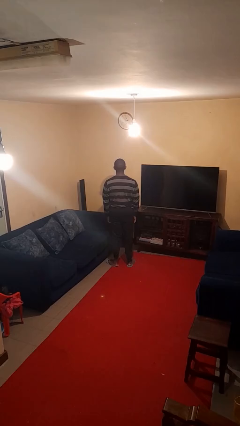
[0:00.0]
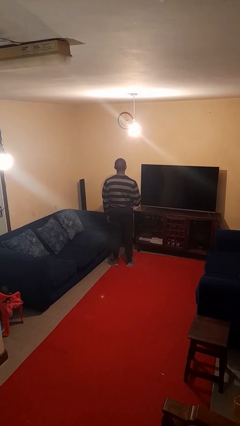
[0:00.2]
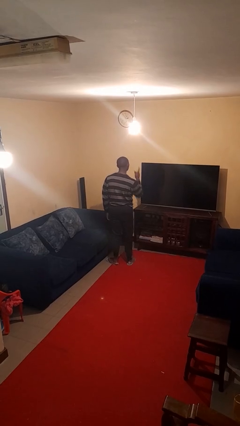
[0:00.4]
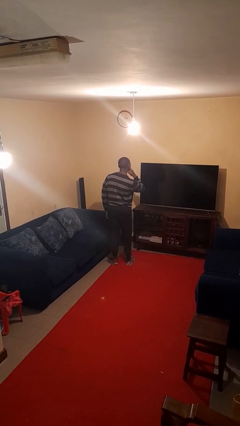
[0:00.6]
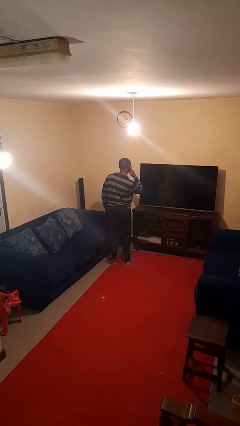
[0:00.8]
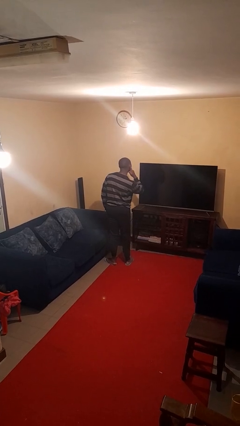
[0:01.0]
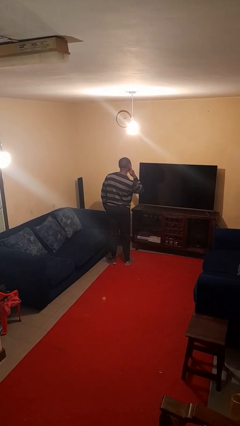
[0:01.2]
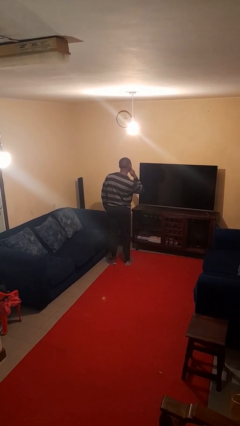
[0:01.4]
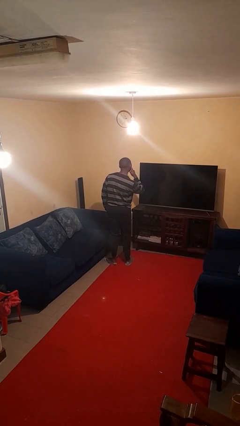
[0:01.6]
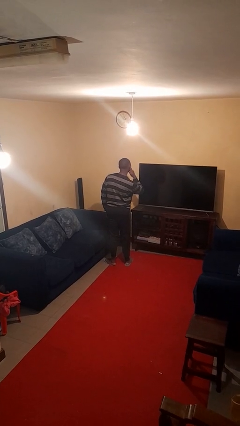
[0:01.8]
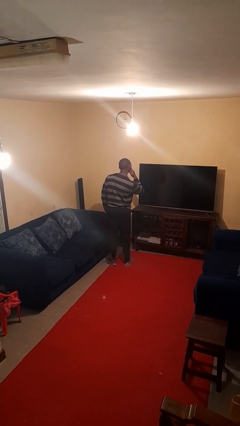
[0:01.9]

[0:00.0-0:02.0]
person gestures listen closely

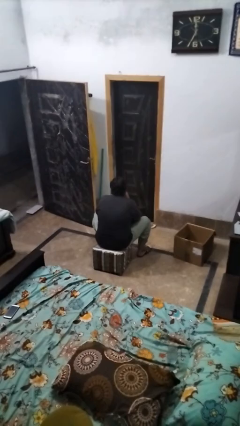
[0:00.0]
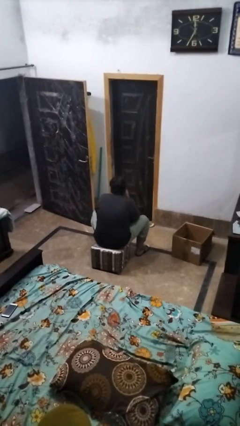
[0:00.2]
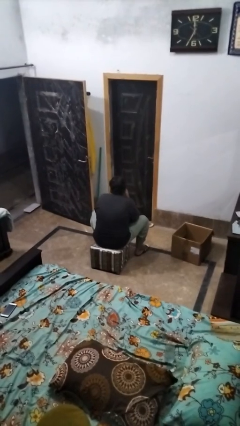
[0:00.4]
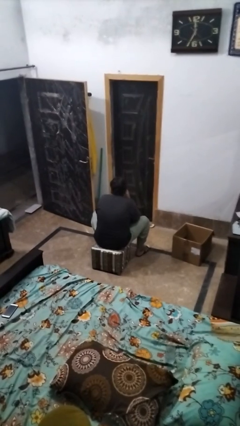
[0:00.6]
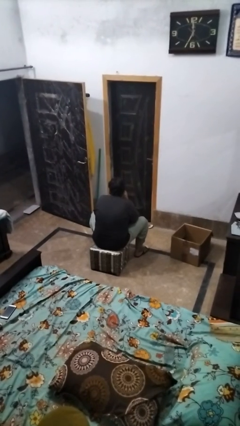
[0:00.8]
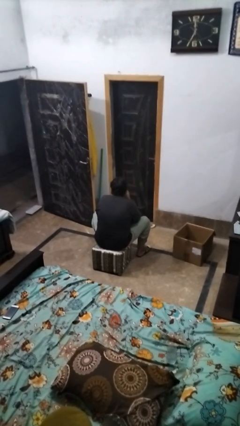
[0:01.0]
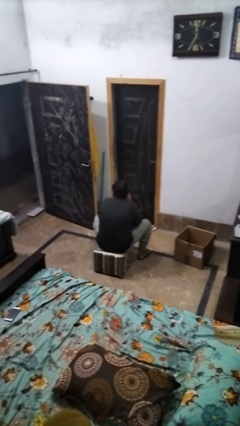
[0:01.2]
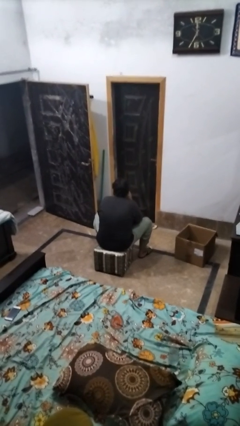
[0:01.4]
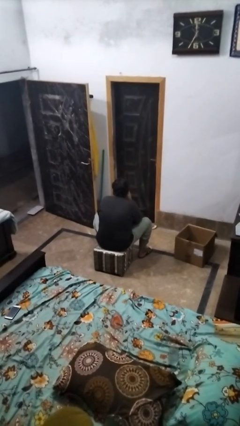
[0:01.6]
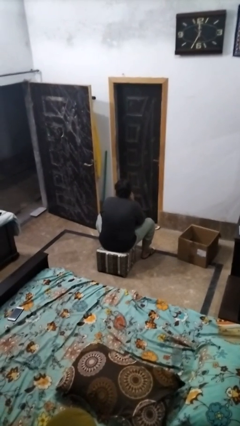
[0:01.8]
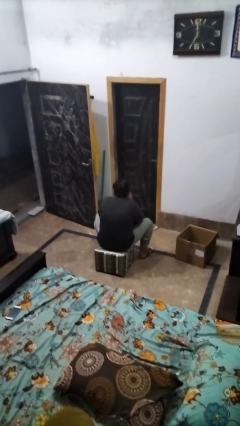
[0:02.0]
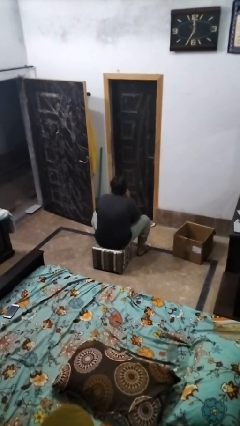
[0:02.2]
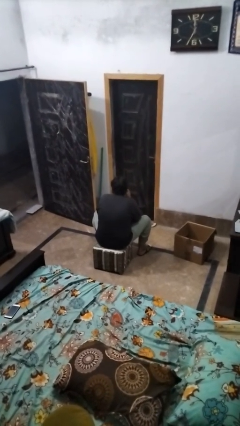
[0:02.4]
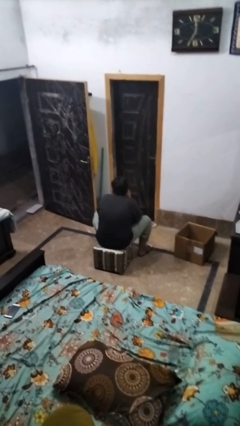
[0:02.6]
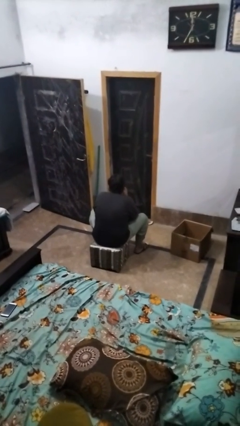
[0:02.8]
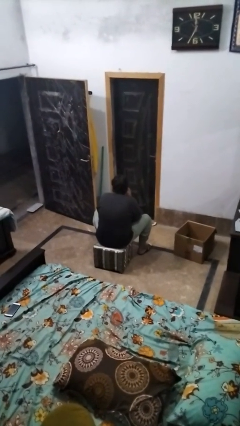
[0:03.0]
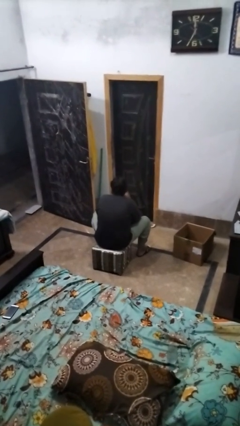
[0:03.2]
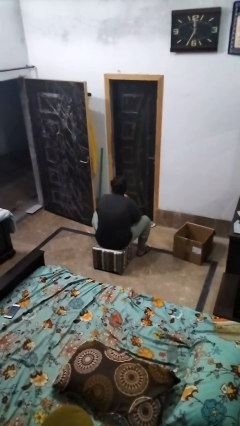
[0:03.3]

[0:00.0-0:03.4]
person strokes chin

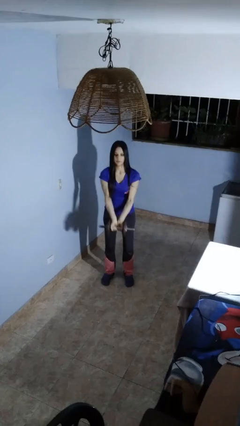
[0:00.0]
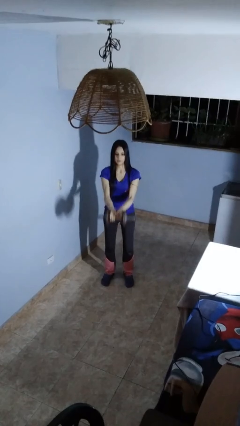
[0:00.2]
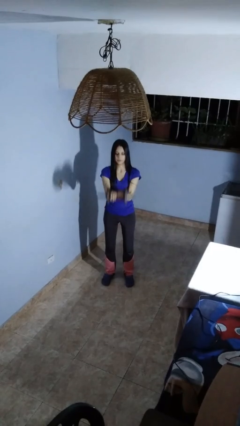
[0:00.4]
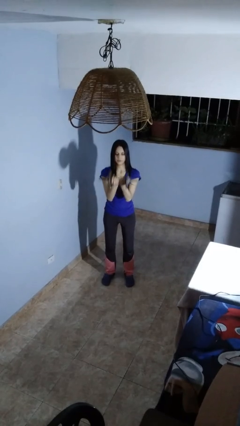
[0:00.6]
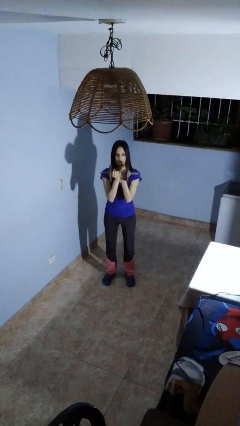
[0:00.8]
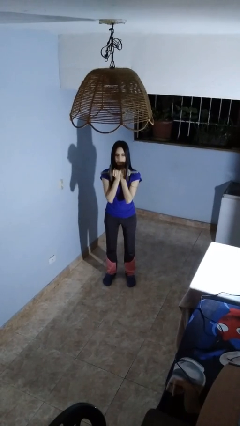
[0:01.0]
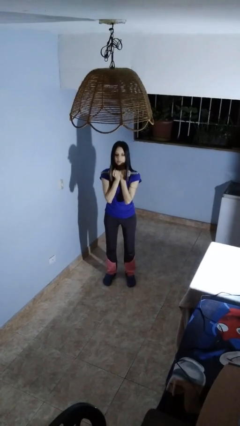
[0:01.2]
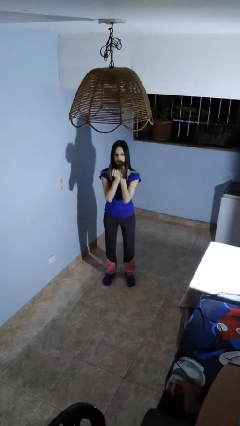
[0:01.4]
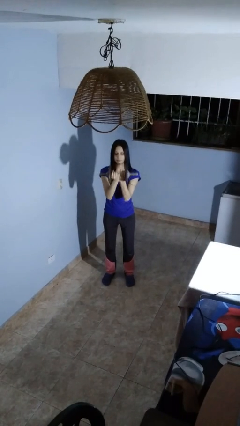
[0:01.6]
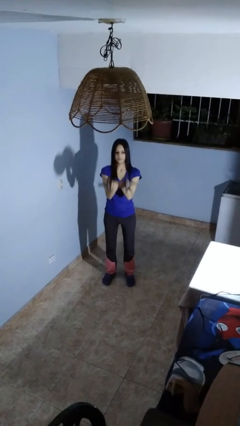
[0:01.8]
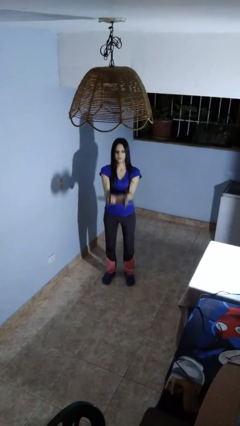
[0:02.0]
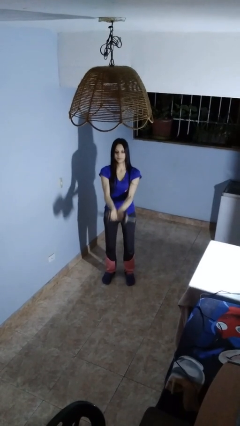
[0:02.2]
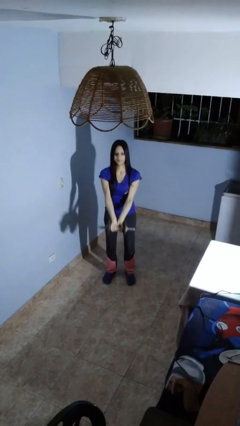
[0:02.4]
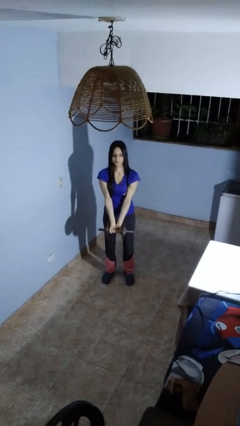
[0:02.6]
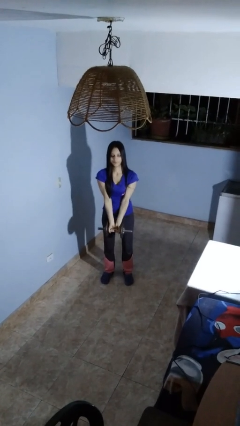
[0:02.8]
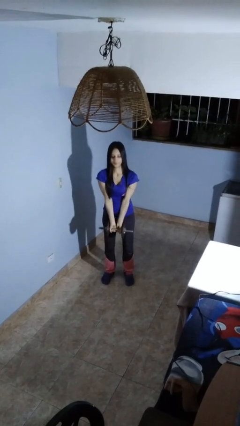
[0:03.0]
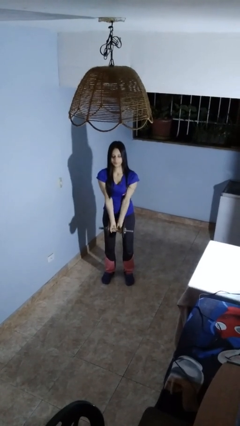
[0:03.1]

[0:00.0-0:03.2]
person lifts dumbbells

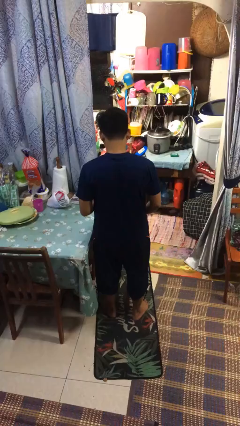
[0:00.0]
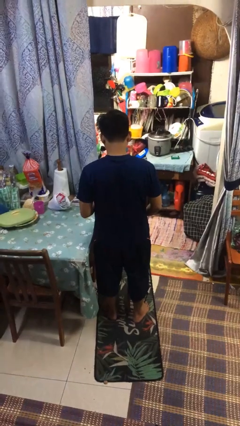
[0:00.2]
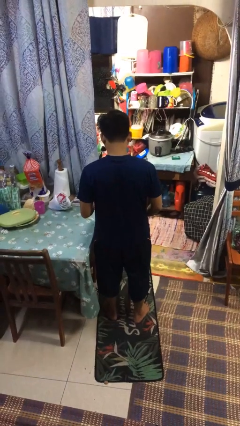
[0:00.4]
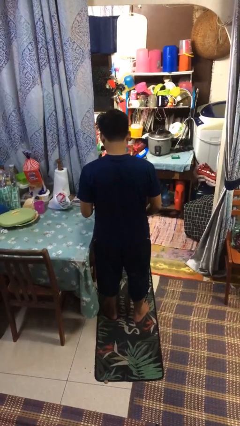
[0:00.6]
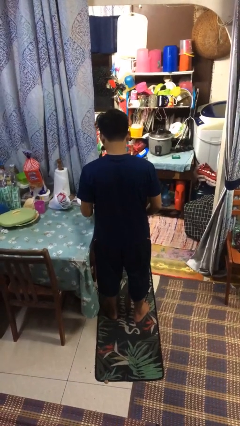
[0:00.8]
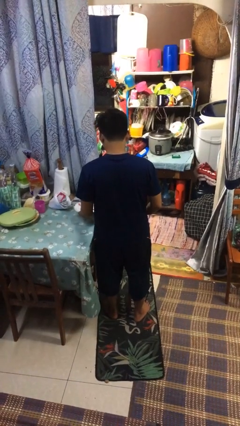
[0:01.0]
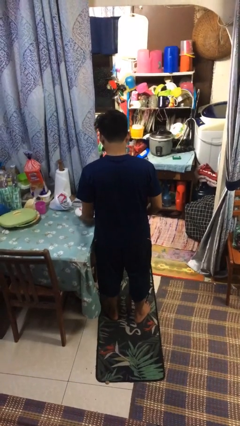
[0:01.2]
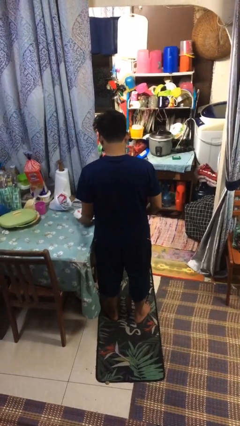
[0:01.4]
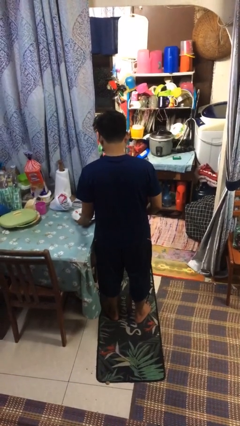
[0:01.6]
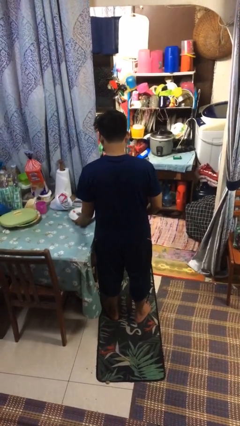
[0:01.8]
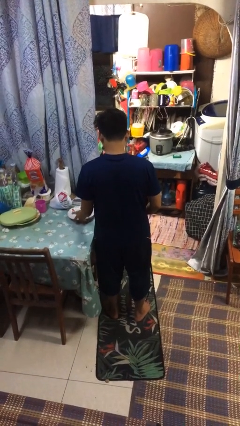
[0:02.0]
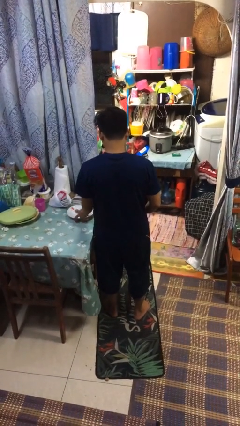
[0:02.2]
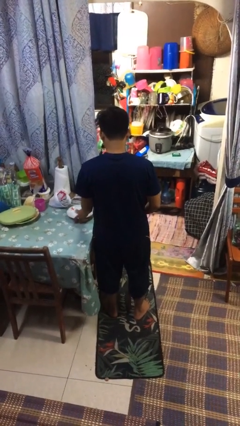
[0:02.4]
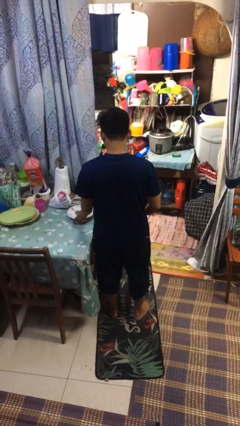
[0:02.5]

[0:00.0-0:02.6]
person sets table

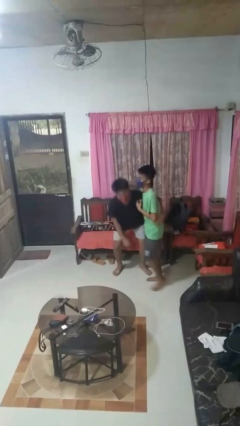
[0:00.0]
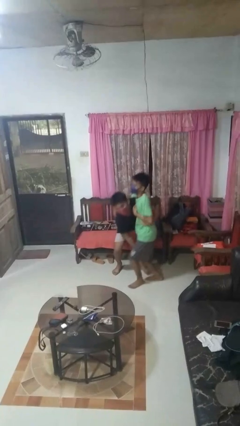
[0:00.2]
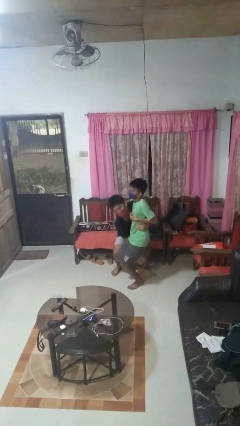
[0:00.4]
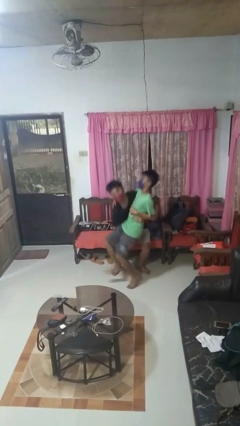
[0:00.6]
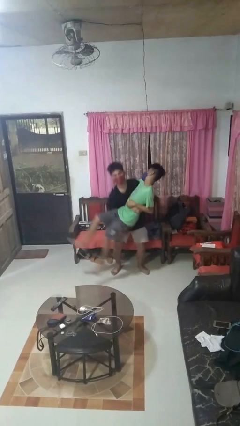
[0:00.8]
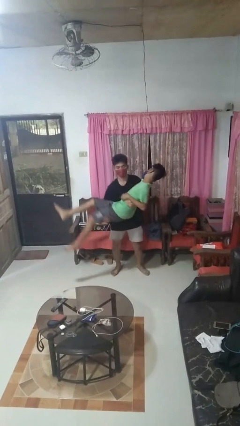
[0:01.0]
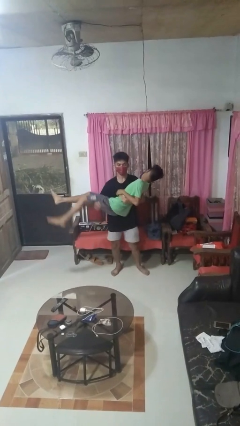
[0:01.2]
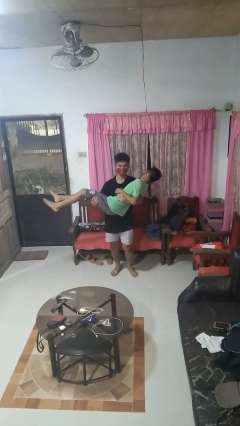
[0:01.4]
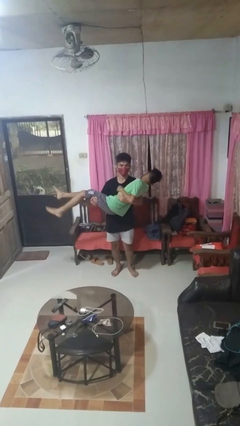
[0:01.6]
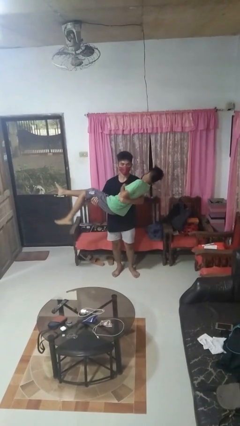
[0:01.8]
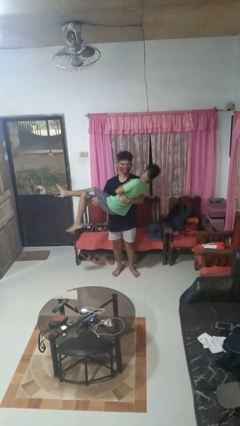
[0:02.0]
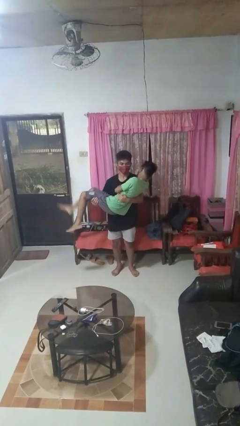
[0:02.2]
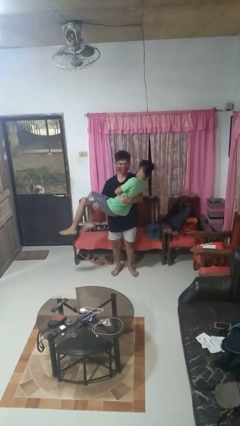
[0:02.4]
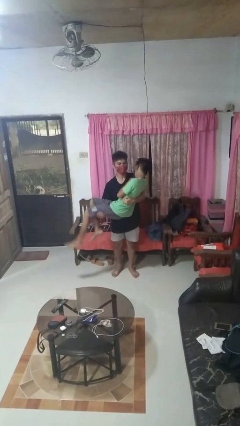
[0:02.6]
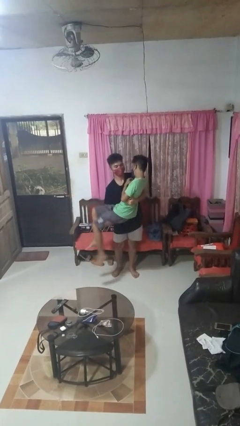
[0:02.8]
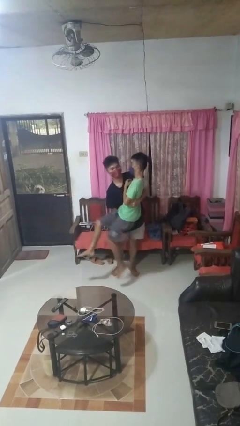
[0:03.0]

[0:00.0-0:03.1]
person picks up person

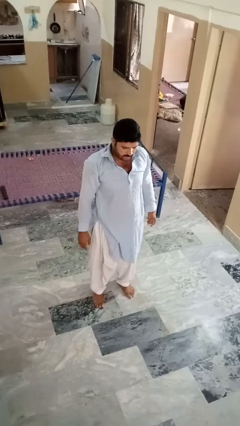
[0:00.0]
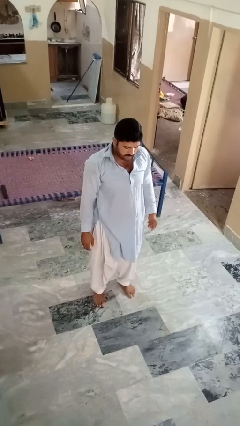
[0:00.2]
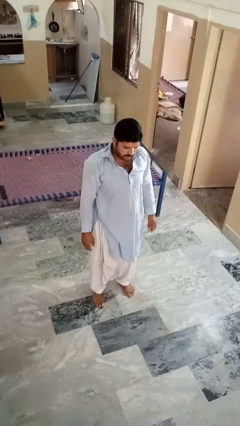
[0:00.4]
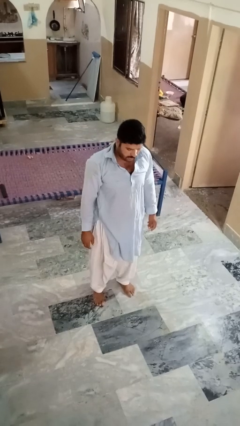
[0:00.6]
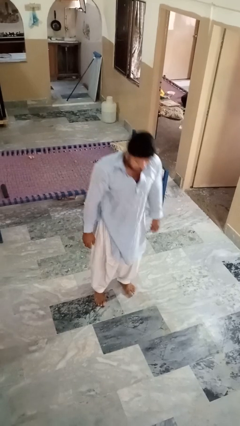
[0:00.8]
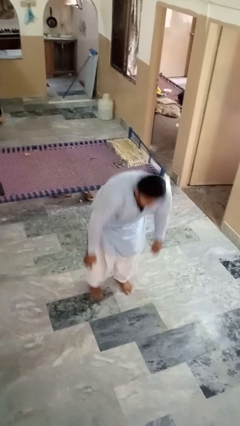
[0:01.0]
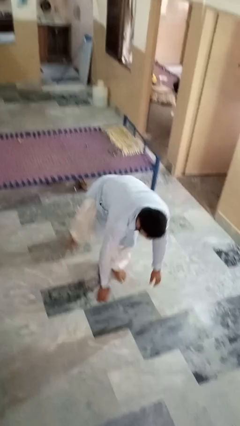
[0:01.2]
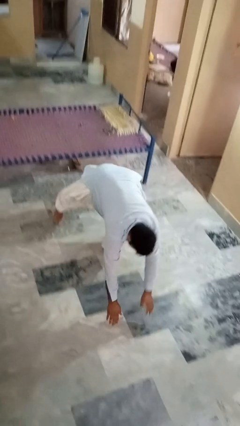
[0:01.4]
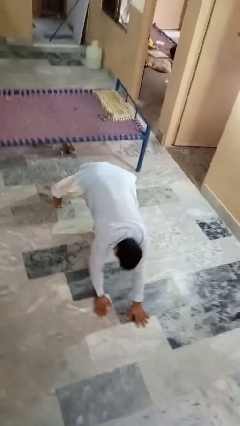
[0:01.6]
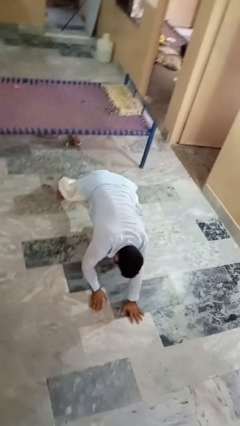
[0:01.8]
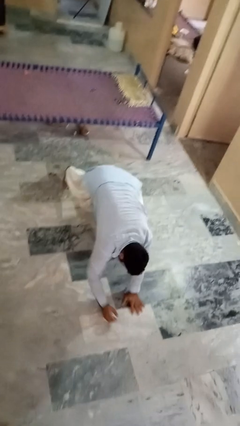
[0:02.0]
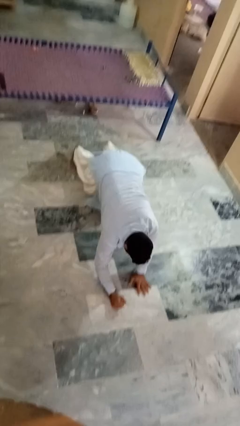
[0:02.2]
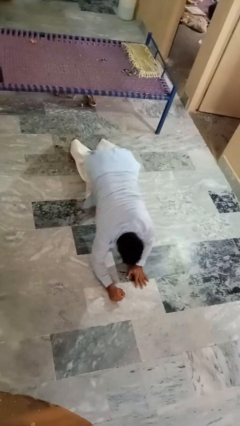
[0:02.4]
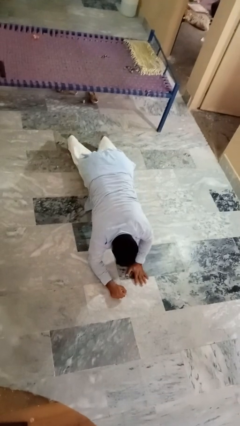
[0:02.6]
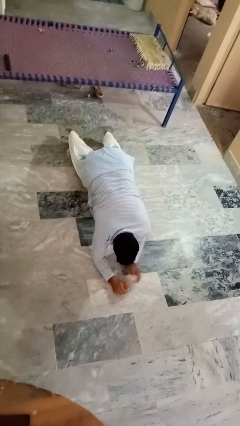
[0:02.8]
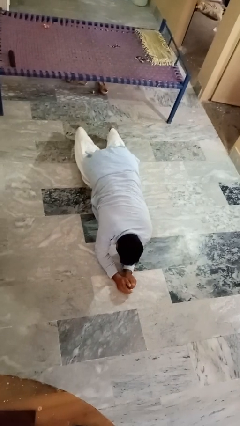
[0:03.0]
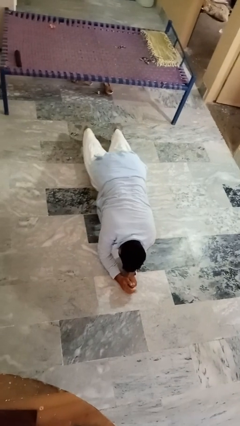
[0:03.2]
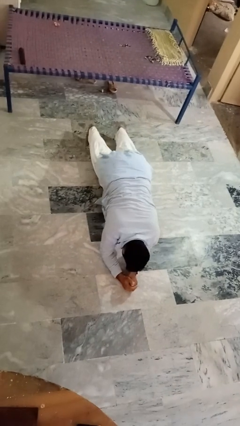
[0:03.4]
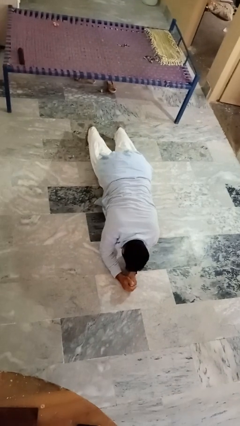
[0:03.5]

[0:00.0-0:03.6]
person exercises with plank
